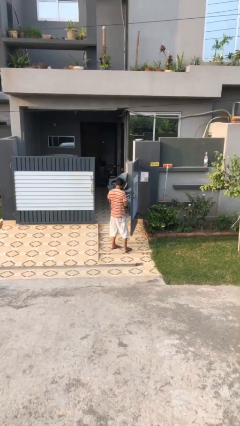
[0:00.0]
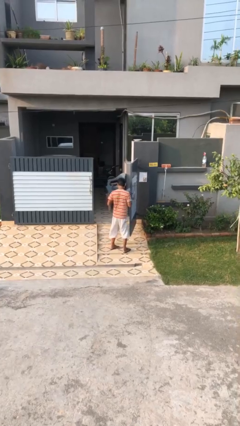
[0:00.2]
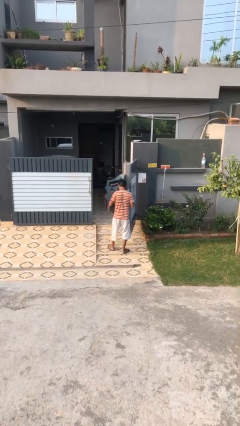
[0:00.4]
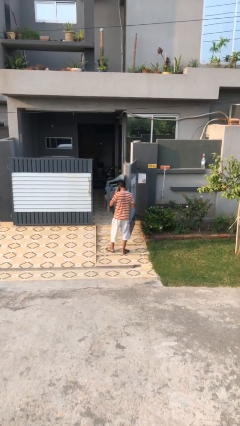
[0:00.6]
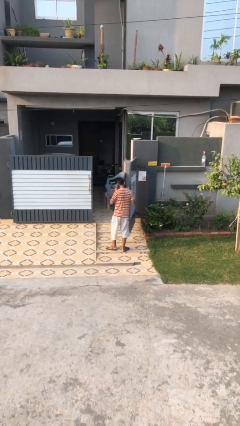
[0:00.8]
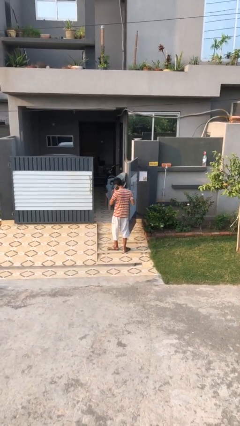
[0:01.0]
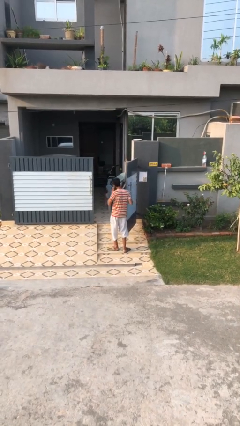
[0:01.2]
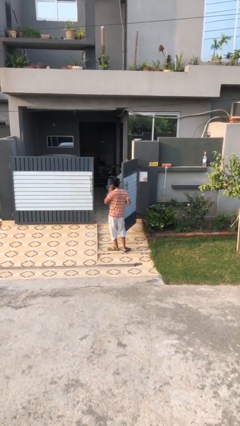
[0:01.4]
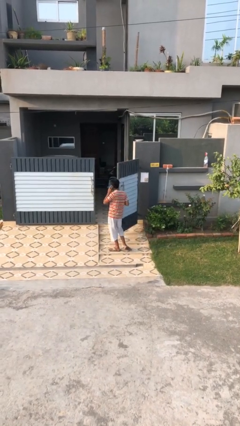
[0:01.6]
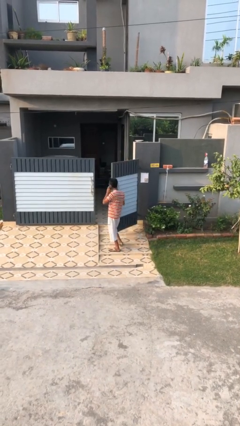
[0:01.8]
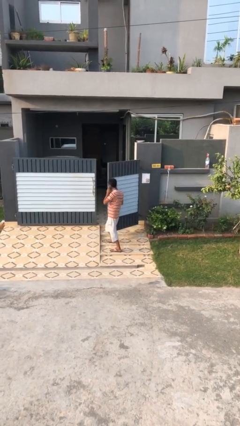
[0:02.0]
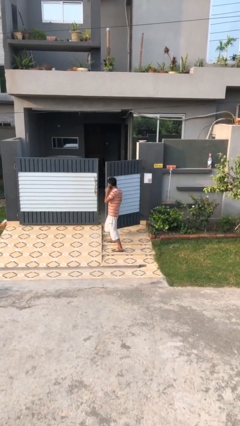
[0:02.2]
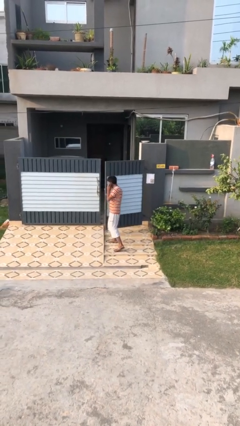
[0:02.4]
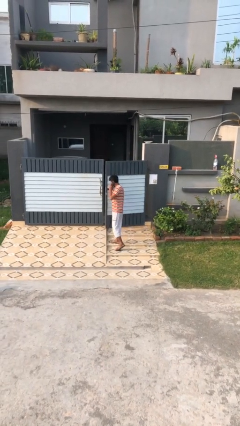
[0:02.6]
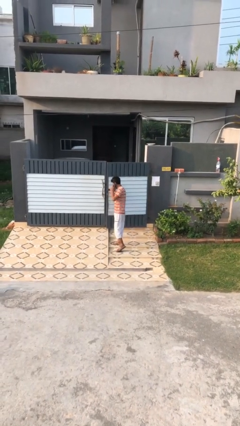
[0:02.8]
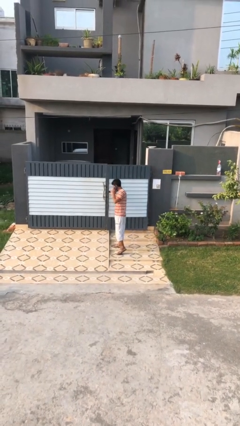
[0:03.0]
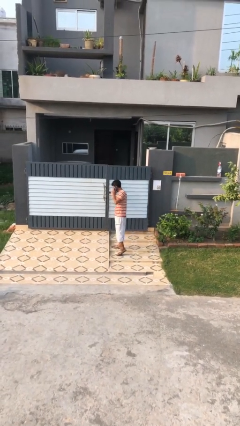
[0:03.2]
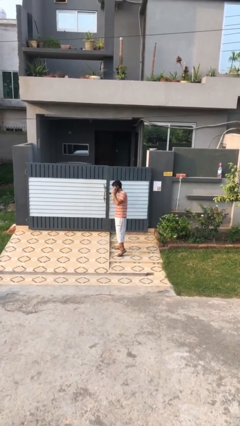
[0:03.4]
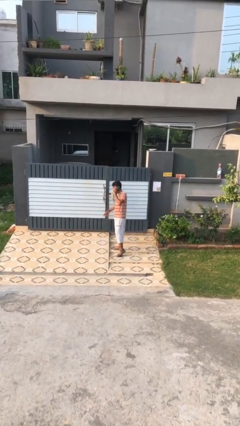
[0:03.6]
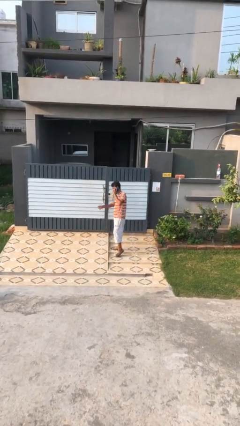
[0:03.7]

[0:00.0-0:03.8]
person closes facility door

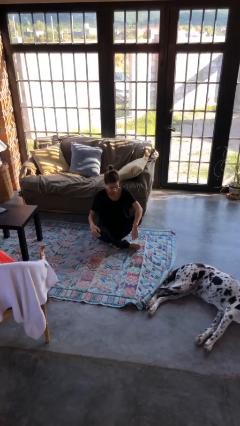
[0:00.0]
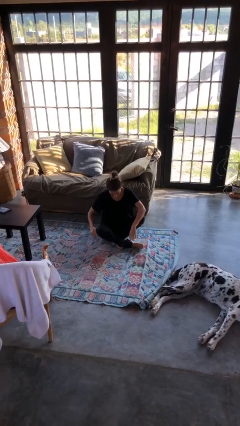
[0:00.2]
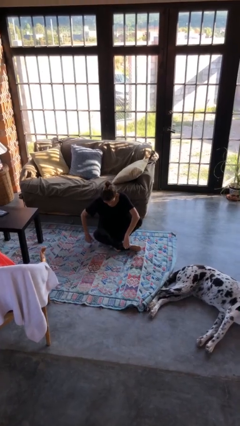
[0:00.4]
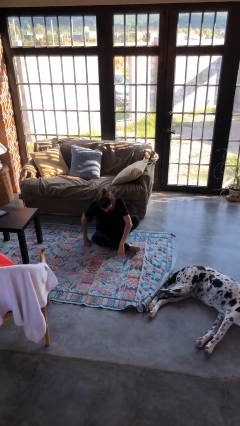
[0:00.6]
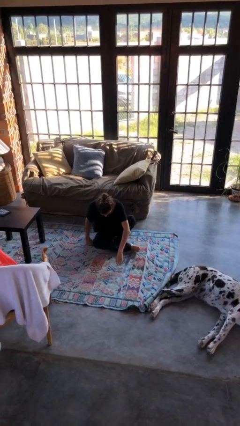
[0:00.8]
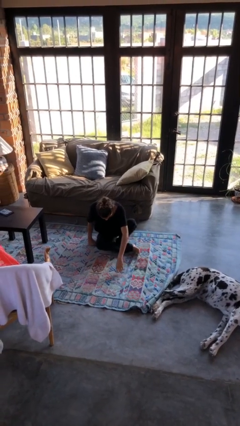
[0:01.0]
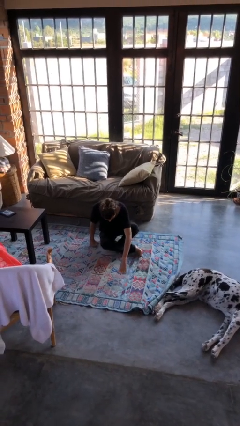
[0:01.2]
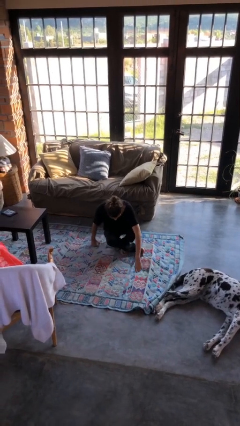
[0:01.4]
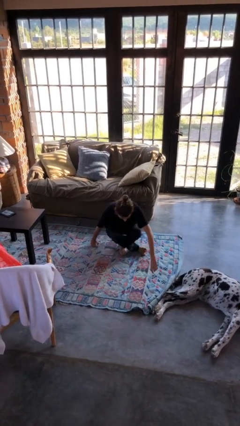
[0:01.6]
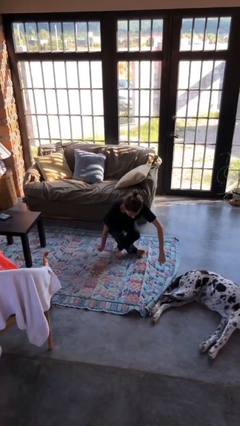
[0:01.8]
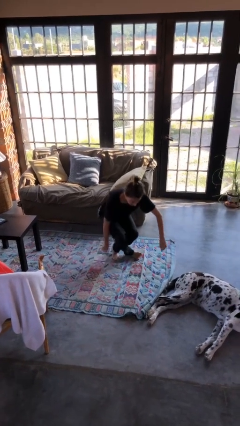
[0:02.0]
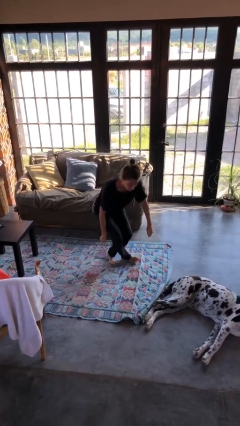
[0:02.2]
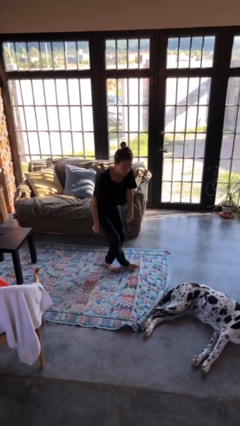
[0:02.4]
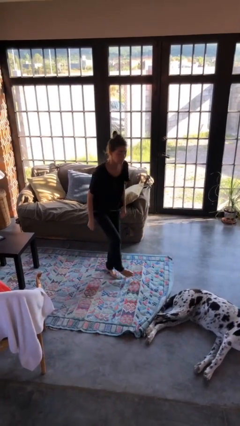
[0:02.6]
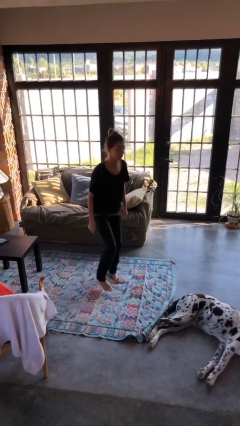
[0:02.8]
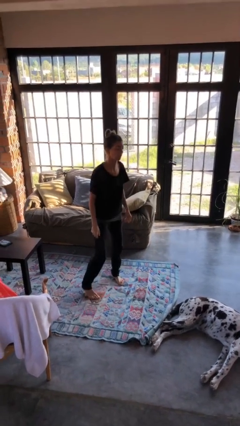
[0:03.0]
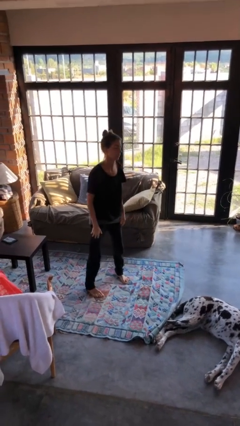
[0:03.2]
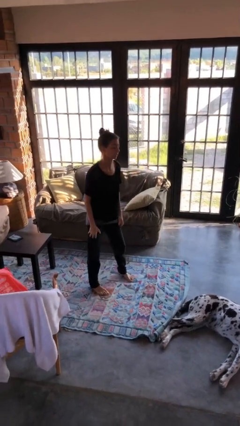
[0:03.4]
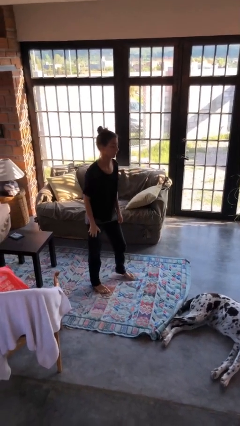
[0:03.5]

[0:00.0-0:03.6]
person stands up from floor

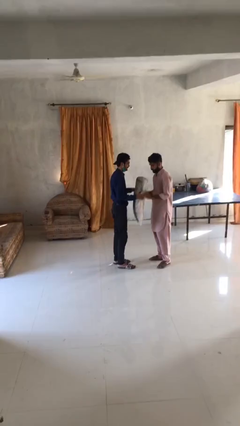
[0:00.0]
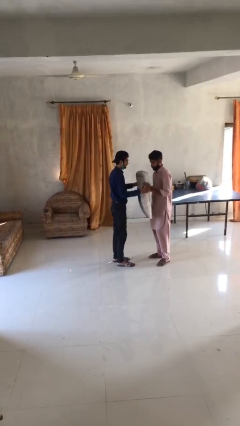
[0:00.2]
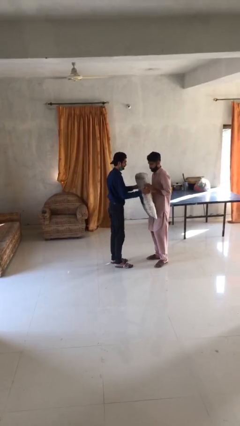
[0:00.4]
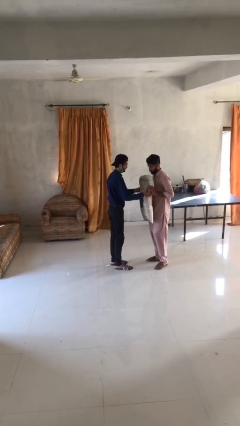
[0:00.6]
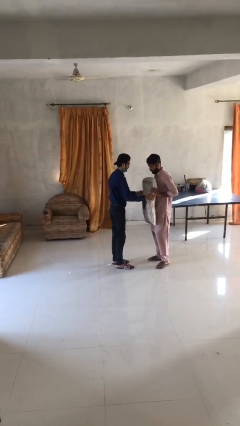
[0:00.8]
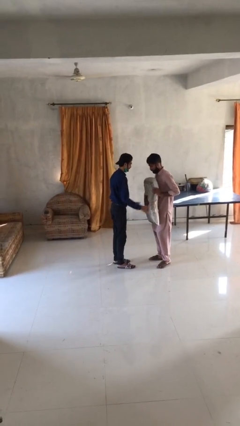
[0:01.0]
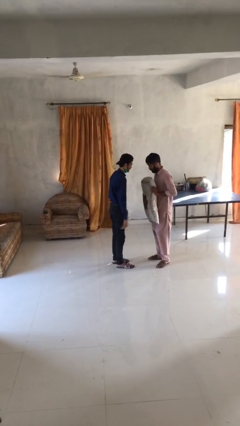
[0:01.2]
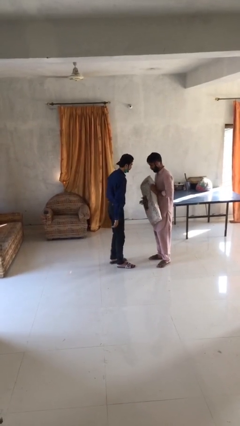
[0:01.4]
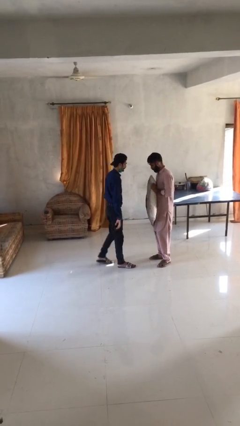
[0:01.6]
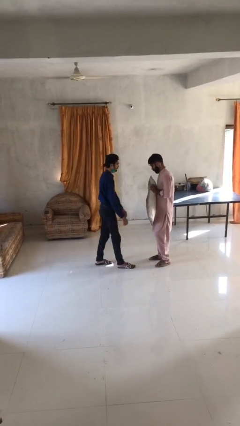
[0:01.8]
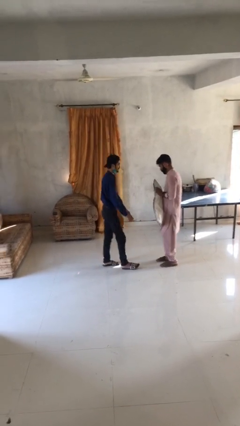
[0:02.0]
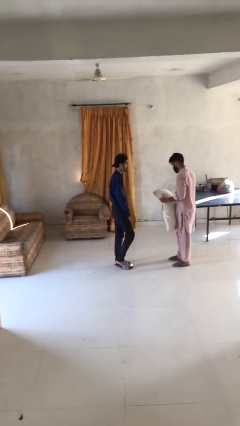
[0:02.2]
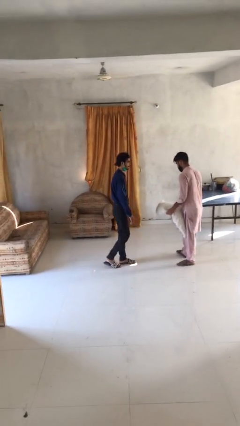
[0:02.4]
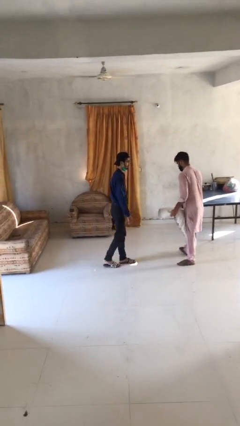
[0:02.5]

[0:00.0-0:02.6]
person transfers object to person

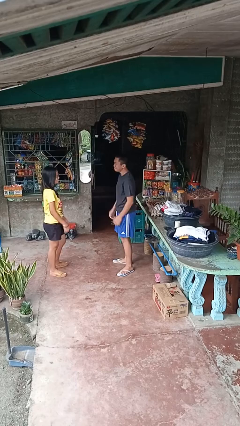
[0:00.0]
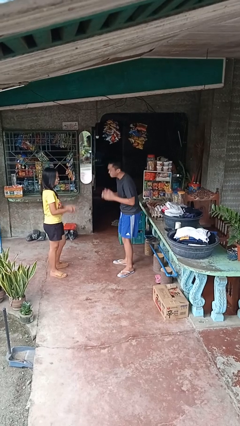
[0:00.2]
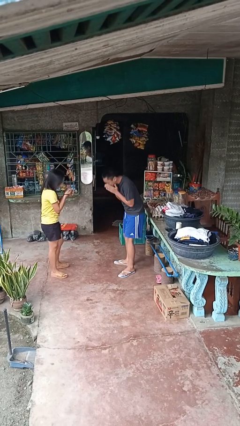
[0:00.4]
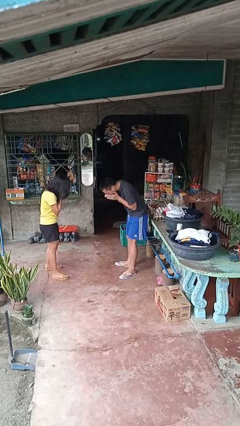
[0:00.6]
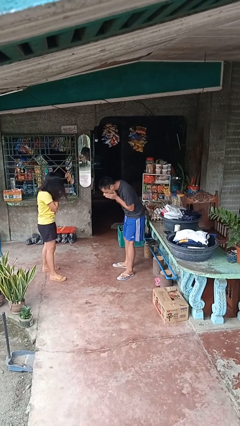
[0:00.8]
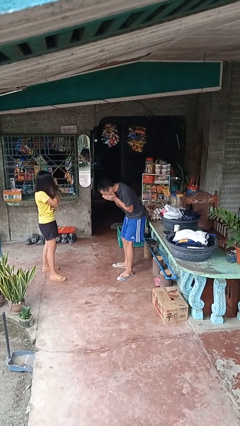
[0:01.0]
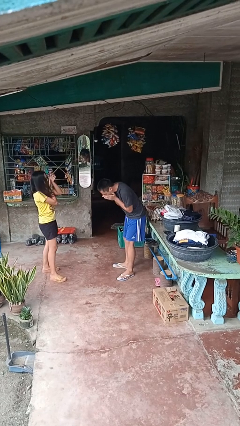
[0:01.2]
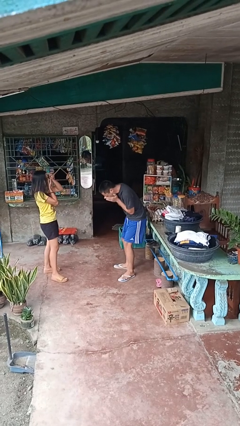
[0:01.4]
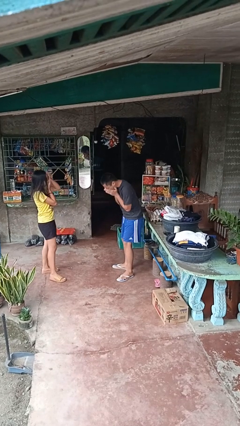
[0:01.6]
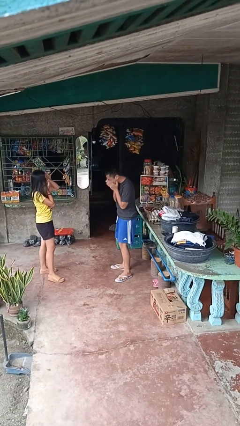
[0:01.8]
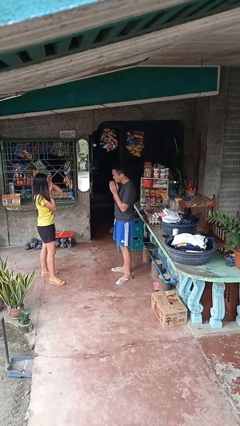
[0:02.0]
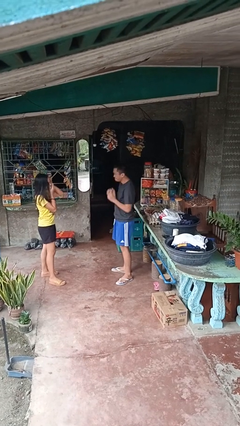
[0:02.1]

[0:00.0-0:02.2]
person laughs with person

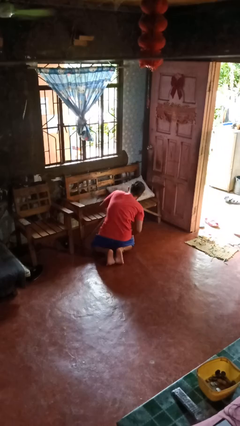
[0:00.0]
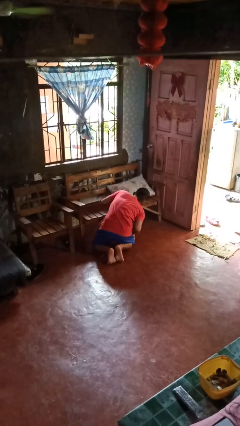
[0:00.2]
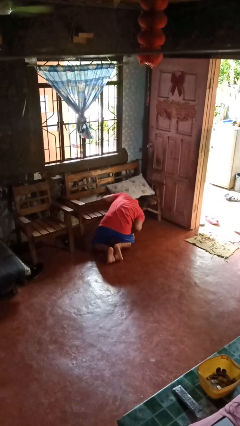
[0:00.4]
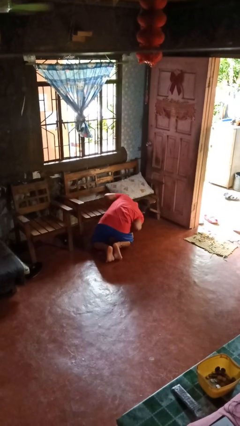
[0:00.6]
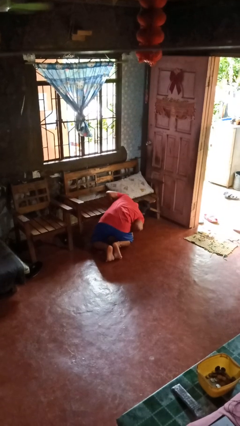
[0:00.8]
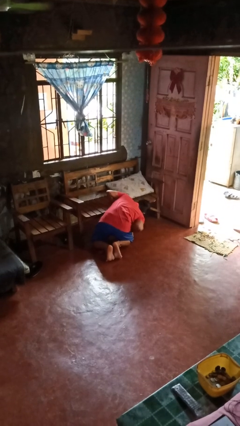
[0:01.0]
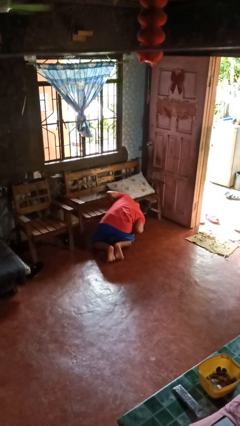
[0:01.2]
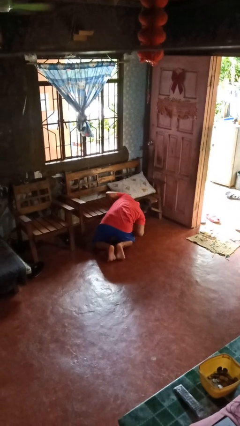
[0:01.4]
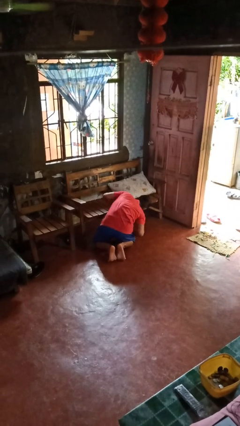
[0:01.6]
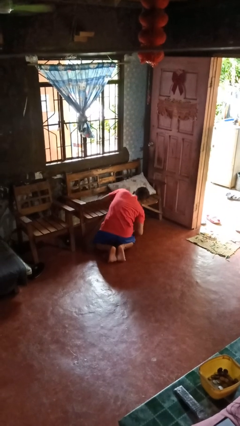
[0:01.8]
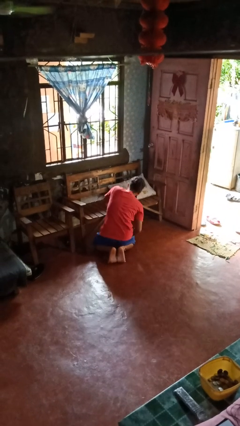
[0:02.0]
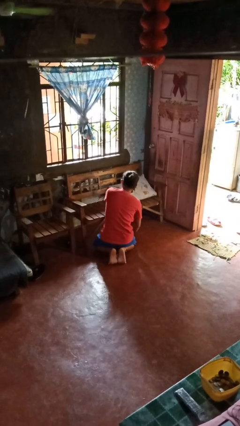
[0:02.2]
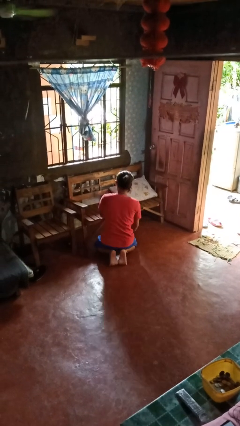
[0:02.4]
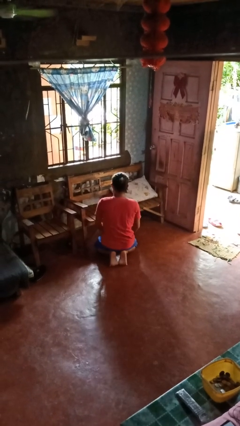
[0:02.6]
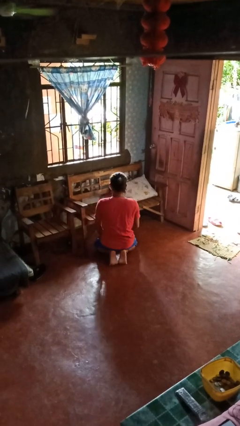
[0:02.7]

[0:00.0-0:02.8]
person searches in couch

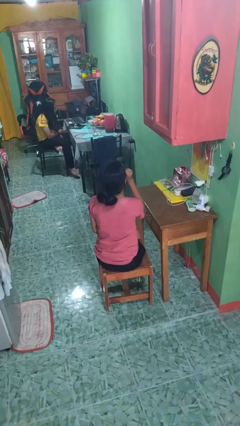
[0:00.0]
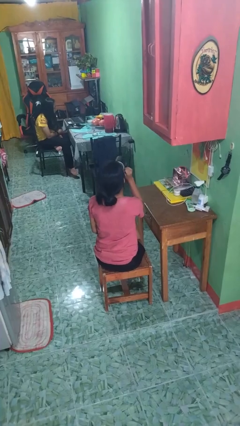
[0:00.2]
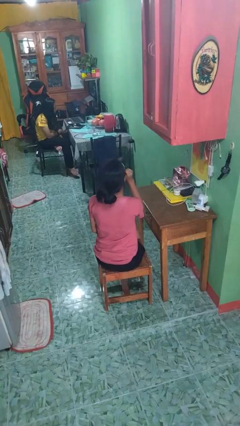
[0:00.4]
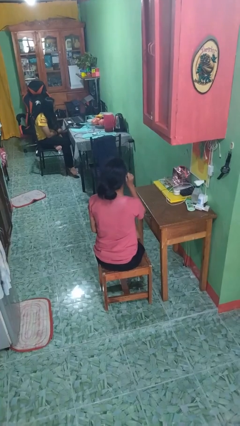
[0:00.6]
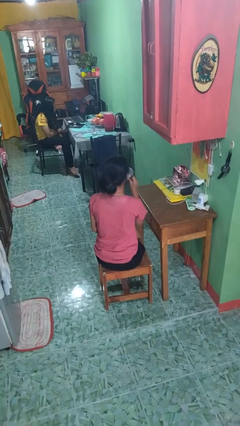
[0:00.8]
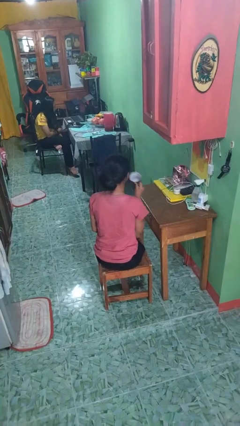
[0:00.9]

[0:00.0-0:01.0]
person drinks from mug

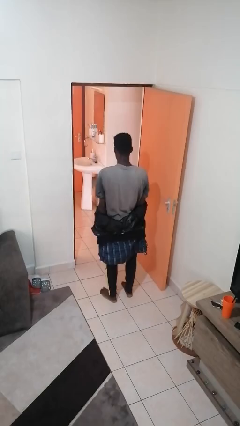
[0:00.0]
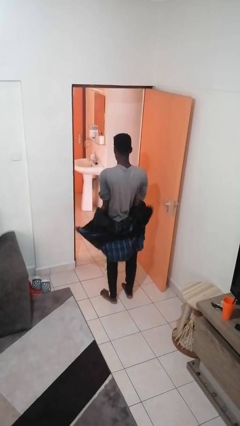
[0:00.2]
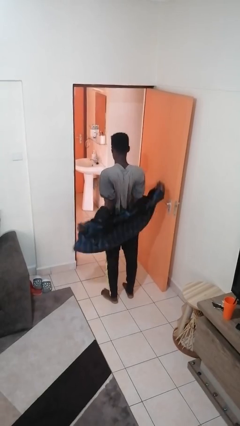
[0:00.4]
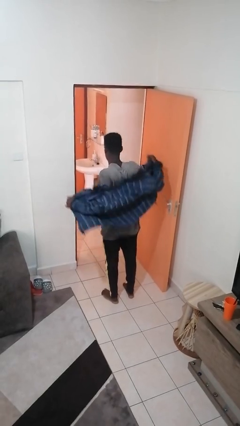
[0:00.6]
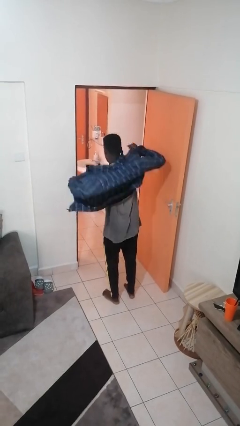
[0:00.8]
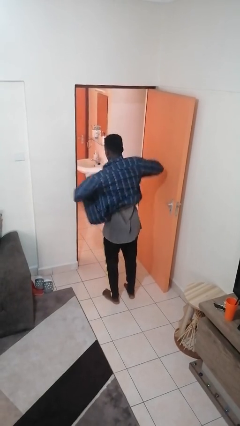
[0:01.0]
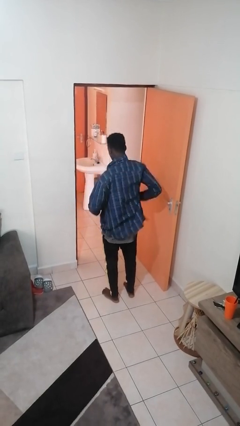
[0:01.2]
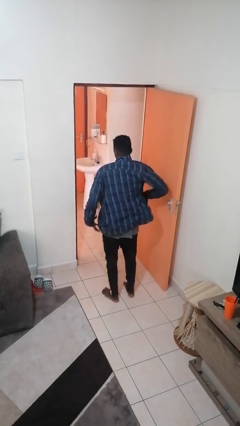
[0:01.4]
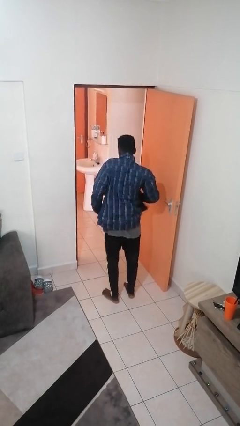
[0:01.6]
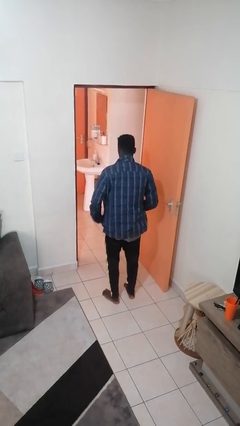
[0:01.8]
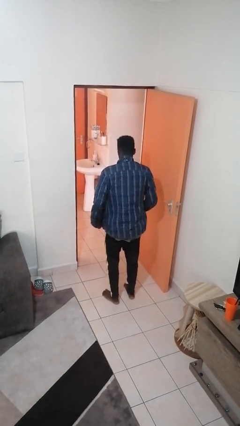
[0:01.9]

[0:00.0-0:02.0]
person puts on jacket
